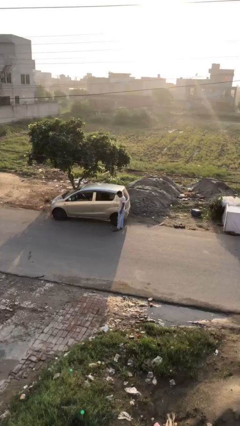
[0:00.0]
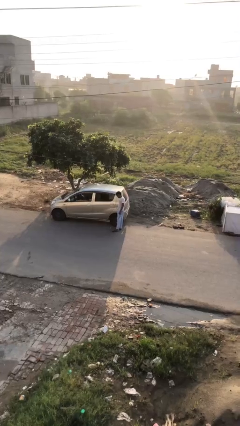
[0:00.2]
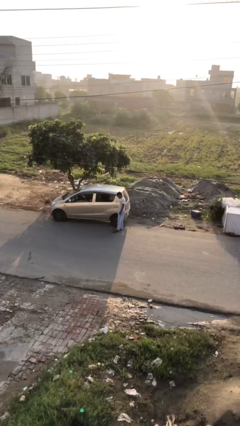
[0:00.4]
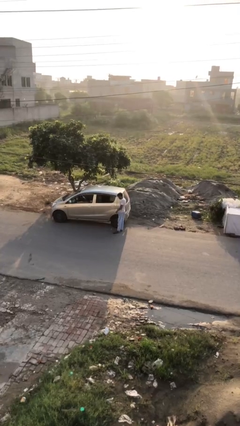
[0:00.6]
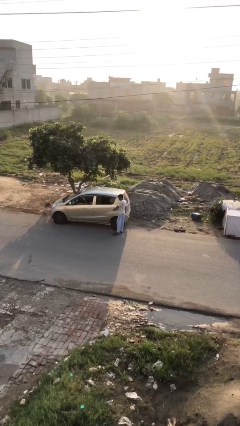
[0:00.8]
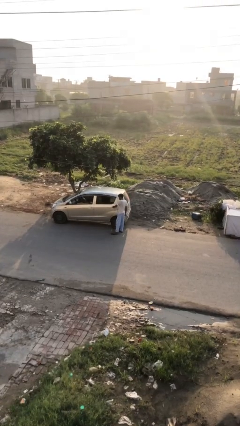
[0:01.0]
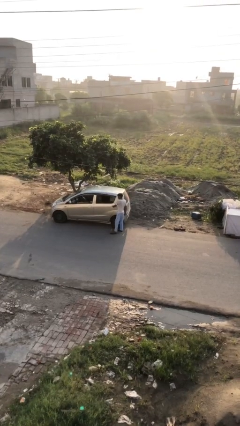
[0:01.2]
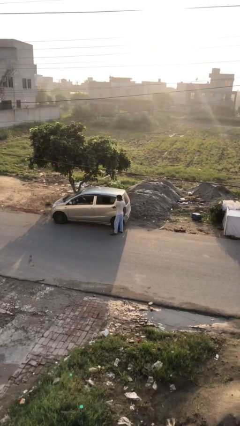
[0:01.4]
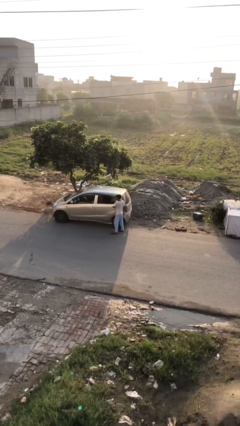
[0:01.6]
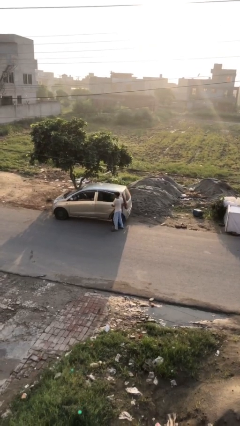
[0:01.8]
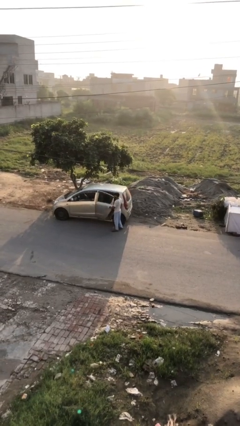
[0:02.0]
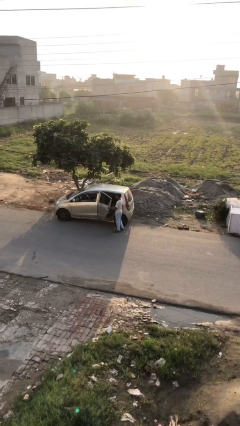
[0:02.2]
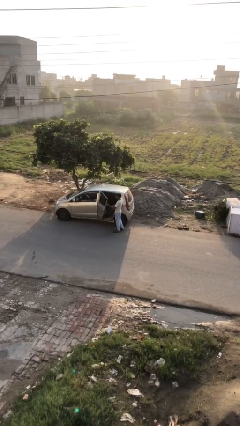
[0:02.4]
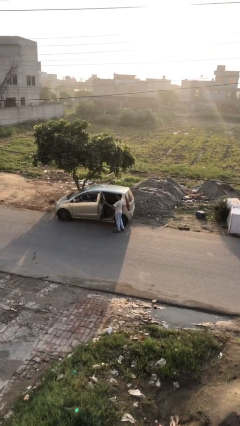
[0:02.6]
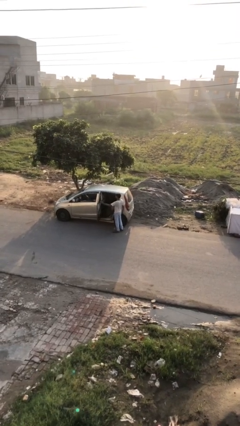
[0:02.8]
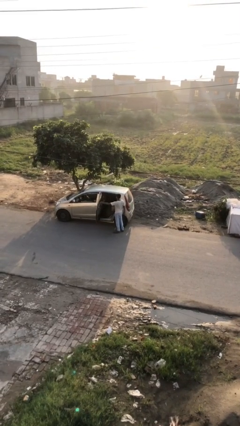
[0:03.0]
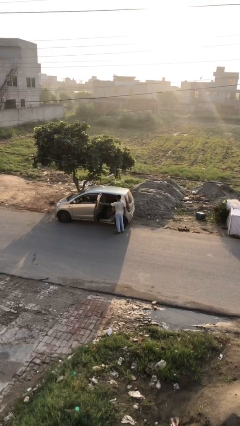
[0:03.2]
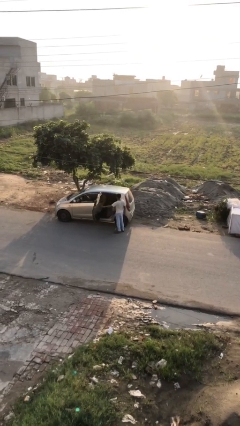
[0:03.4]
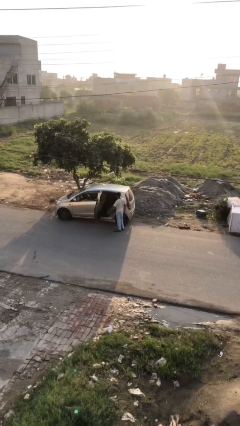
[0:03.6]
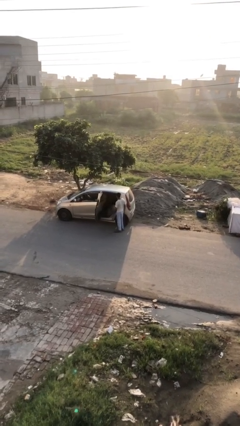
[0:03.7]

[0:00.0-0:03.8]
person opens car door

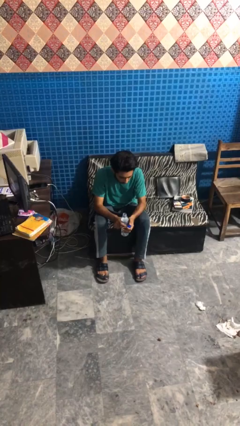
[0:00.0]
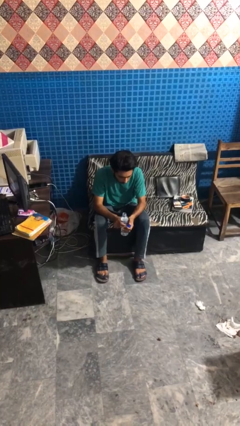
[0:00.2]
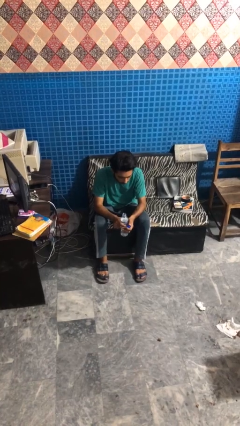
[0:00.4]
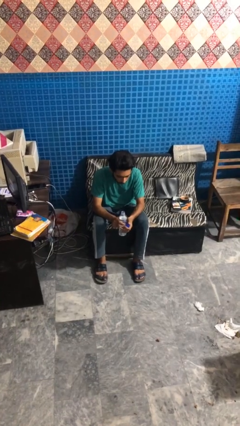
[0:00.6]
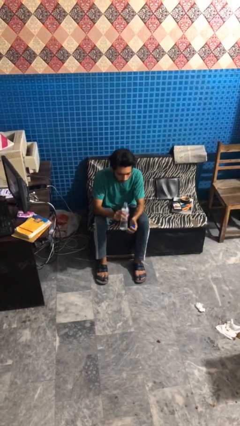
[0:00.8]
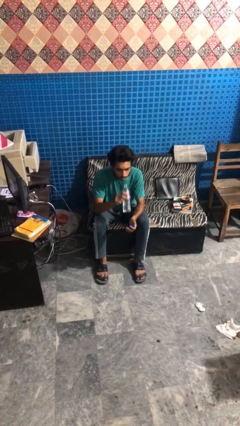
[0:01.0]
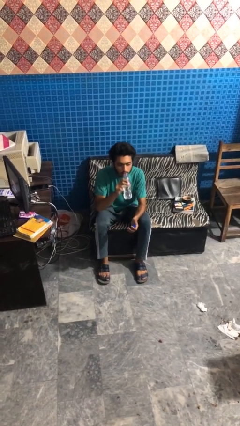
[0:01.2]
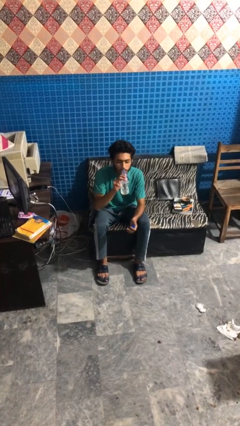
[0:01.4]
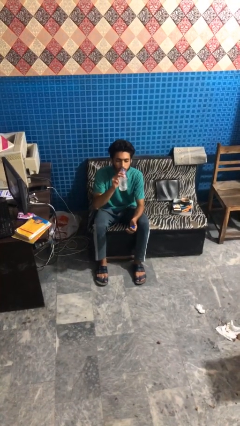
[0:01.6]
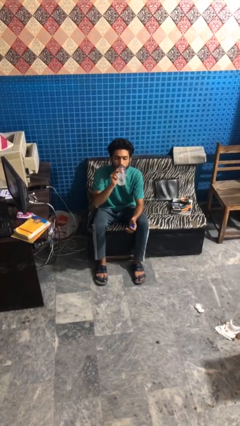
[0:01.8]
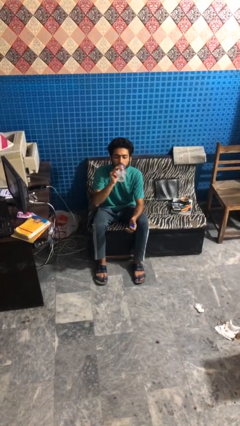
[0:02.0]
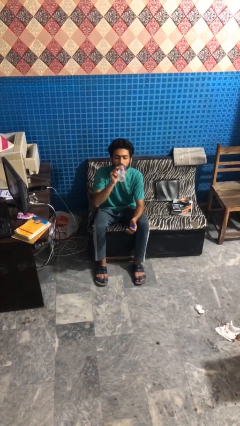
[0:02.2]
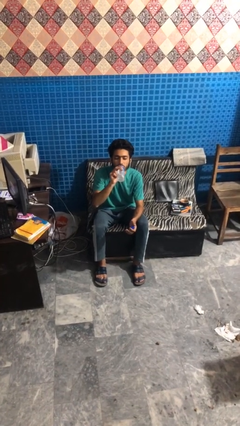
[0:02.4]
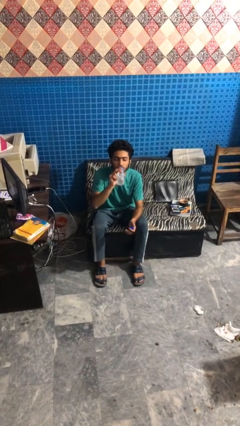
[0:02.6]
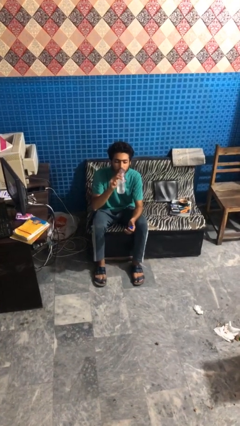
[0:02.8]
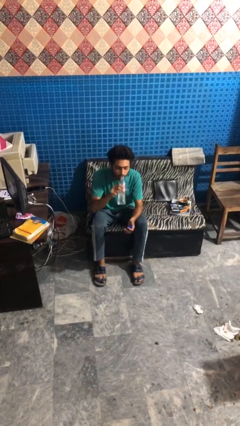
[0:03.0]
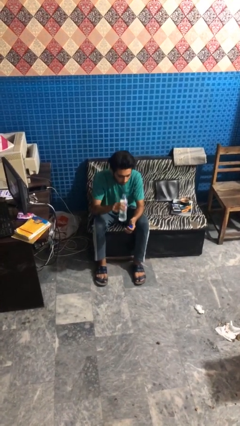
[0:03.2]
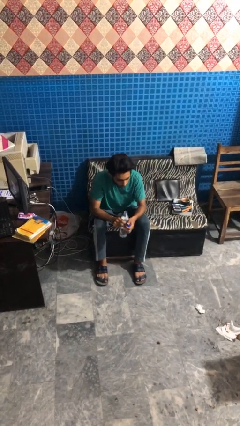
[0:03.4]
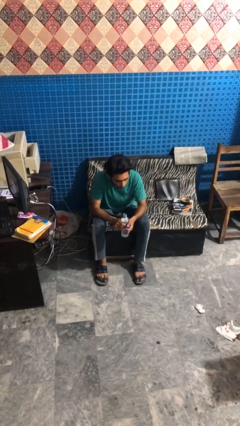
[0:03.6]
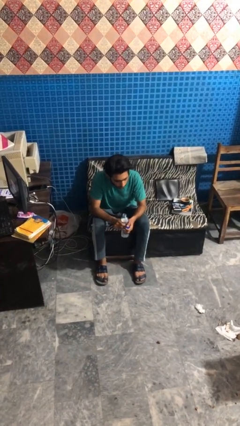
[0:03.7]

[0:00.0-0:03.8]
person drinks from bottle

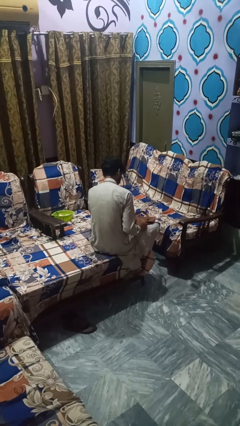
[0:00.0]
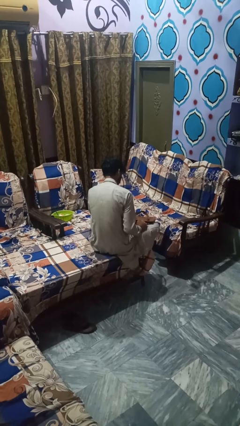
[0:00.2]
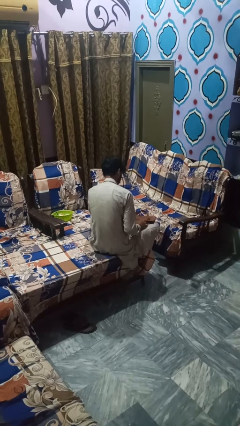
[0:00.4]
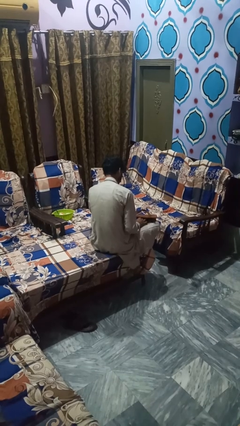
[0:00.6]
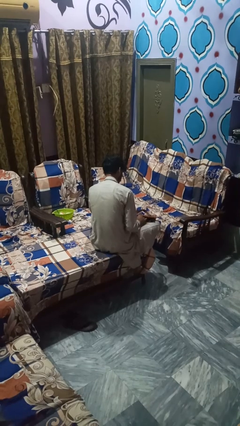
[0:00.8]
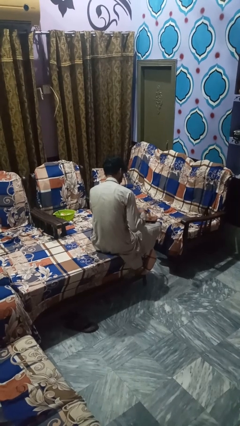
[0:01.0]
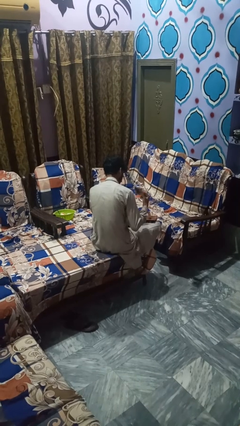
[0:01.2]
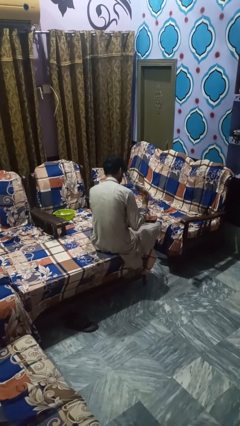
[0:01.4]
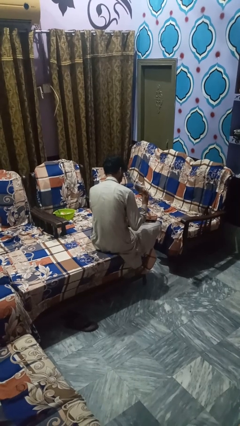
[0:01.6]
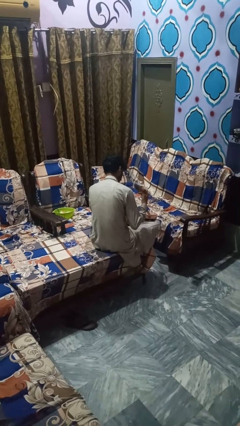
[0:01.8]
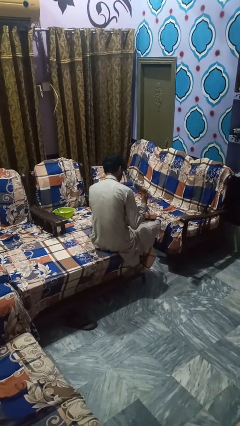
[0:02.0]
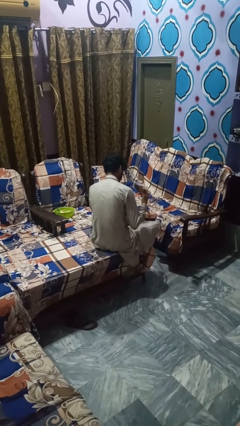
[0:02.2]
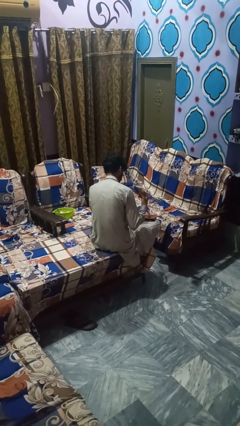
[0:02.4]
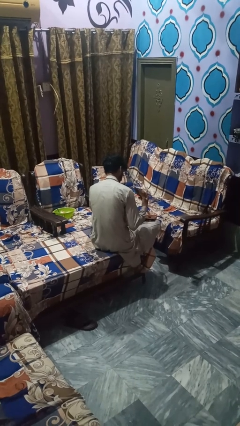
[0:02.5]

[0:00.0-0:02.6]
person takes object from bag

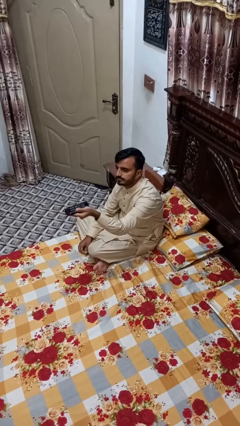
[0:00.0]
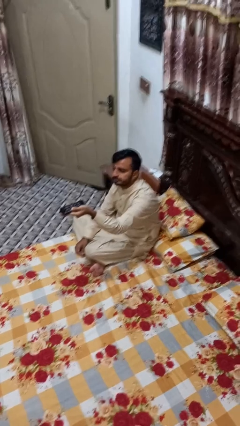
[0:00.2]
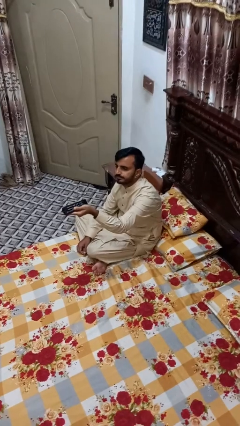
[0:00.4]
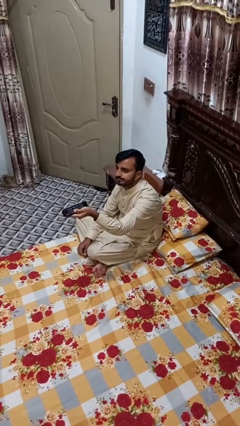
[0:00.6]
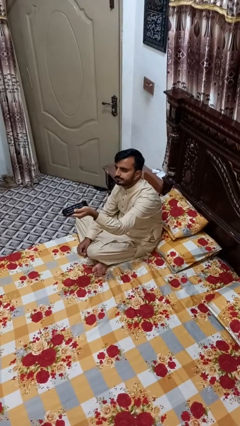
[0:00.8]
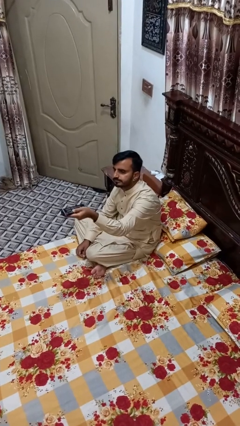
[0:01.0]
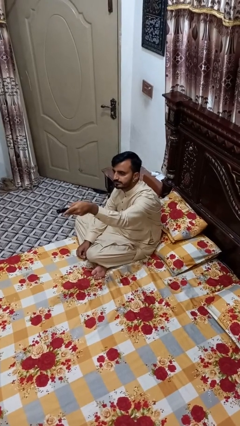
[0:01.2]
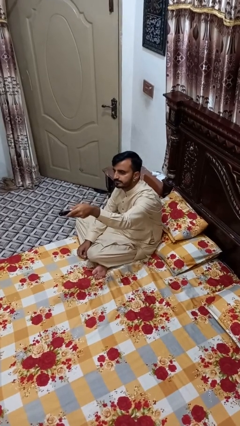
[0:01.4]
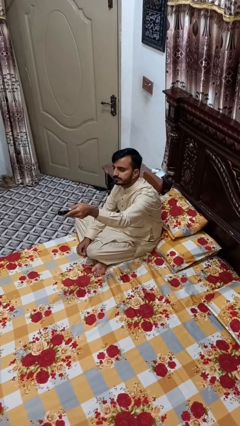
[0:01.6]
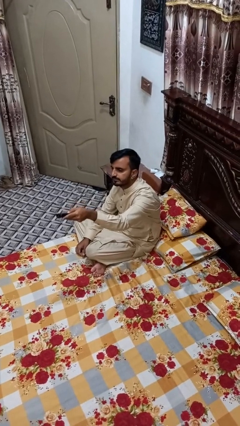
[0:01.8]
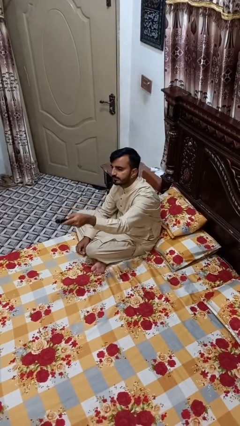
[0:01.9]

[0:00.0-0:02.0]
person uses television remote

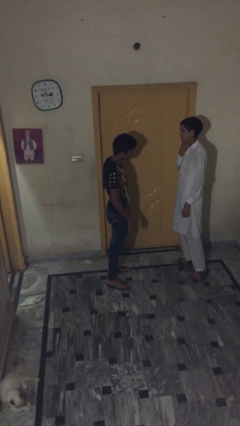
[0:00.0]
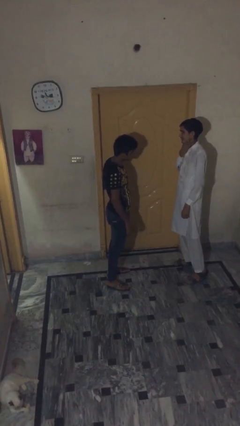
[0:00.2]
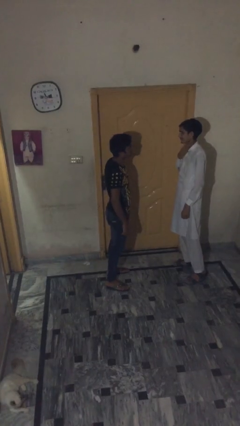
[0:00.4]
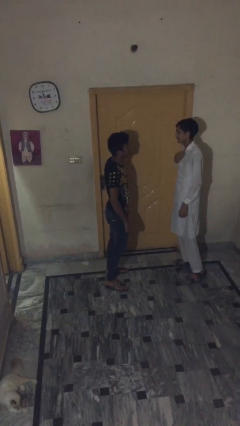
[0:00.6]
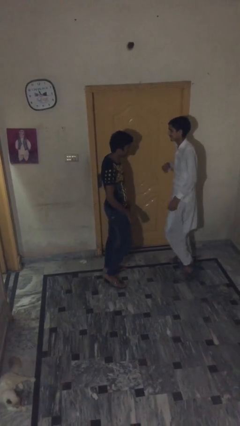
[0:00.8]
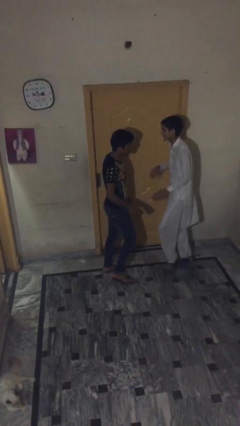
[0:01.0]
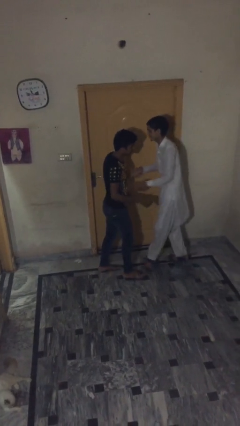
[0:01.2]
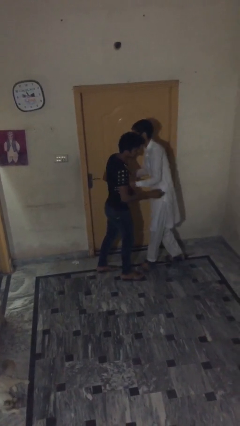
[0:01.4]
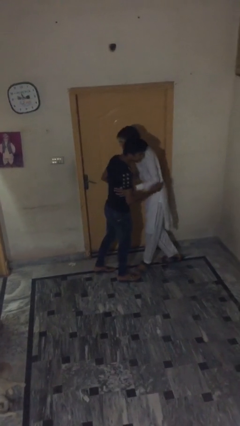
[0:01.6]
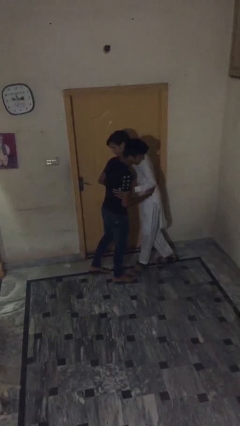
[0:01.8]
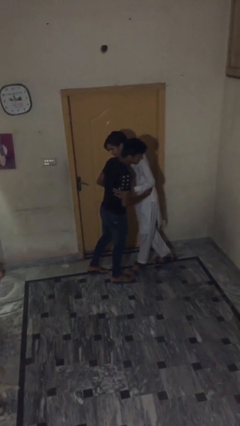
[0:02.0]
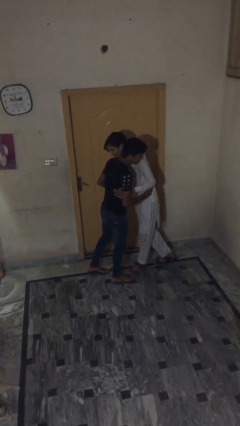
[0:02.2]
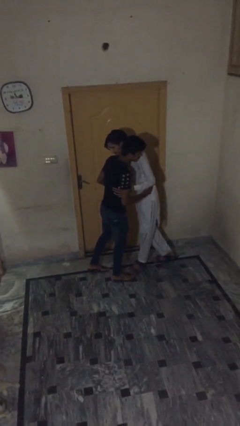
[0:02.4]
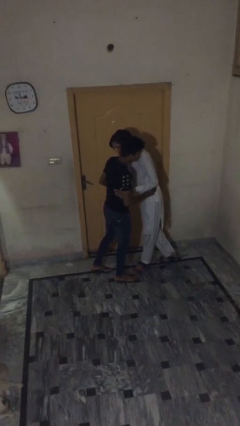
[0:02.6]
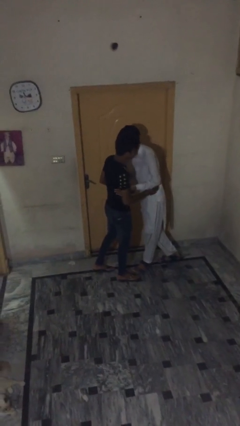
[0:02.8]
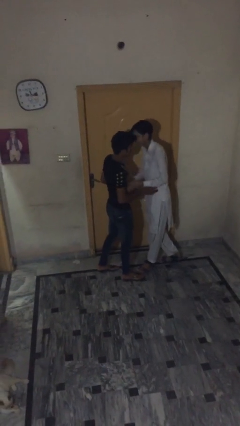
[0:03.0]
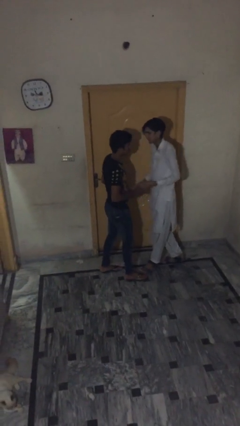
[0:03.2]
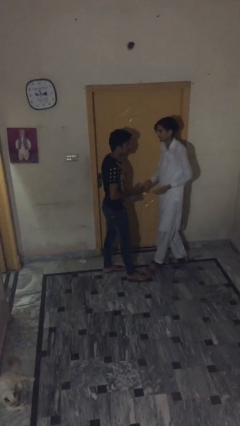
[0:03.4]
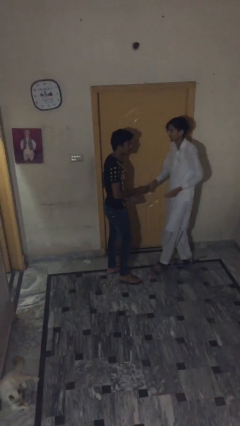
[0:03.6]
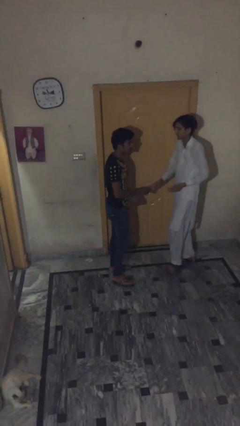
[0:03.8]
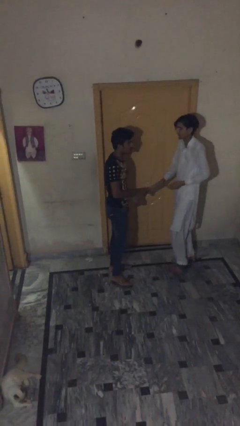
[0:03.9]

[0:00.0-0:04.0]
person embraces person

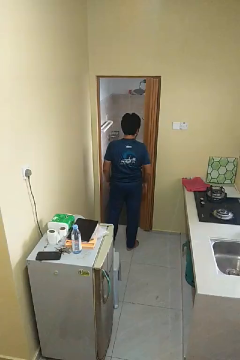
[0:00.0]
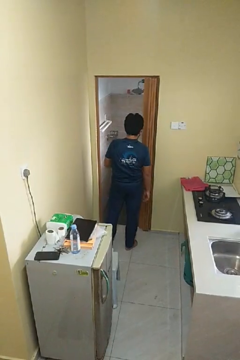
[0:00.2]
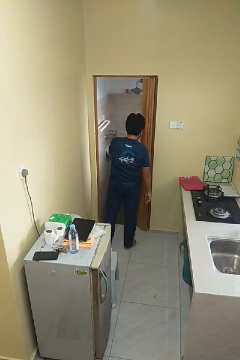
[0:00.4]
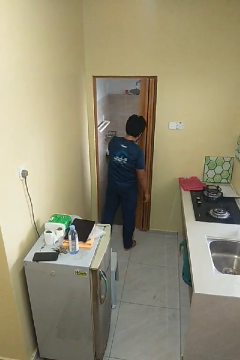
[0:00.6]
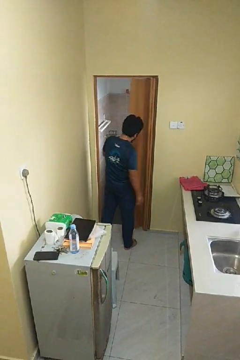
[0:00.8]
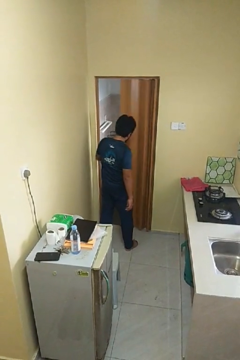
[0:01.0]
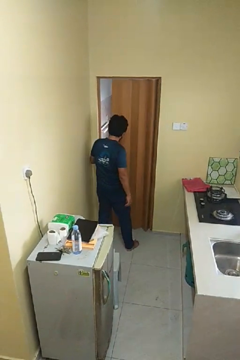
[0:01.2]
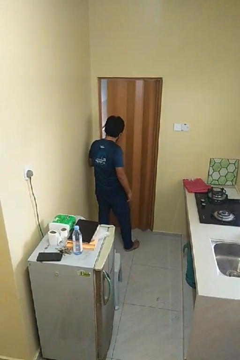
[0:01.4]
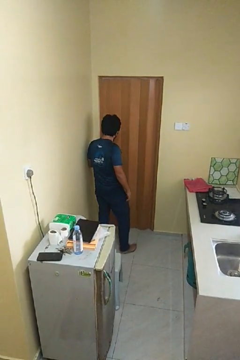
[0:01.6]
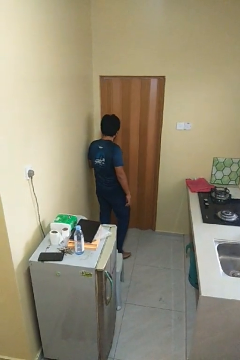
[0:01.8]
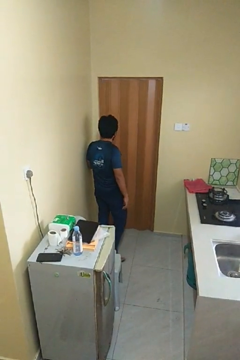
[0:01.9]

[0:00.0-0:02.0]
person closes sliding door

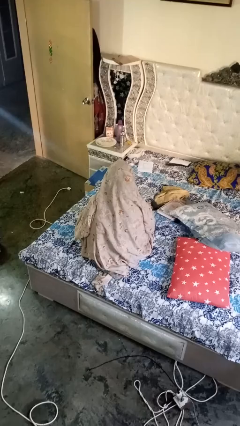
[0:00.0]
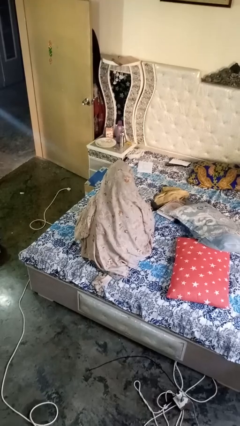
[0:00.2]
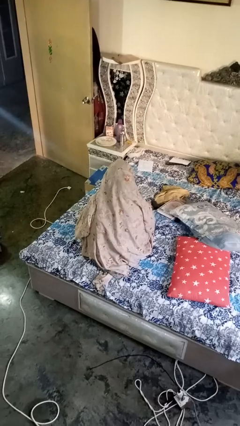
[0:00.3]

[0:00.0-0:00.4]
person wipes mouth with napkin
